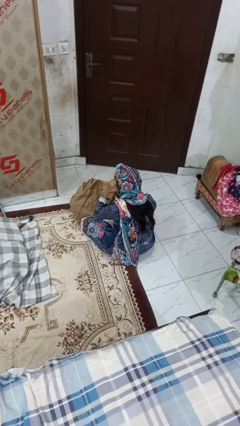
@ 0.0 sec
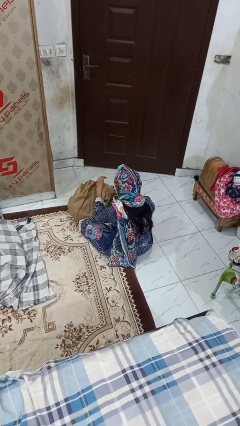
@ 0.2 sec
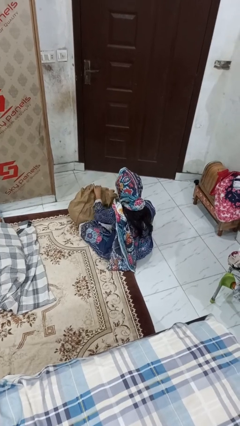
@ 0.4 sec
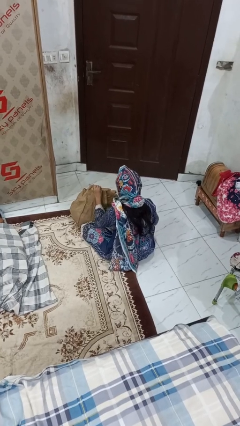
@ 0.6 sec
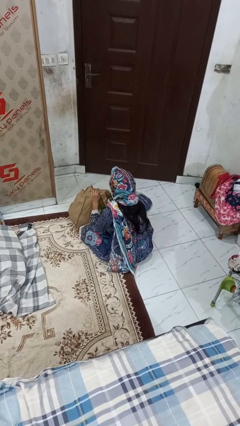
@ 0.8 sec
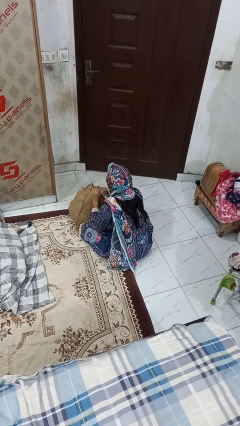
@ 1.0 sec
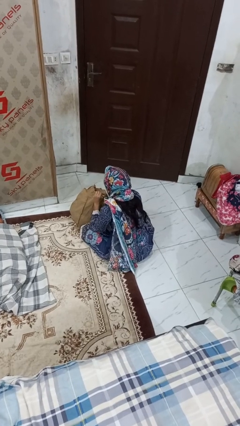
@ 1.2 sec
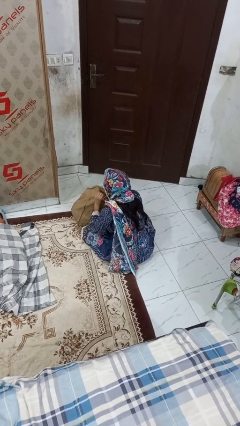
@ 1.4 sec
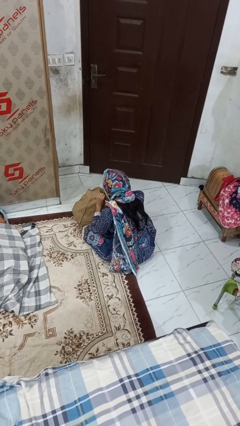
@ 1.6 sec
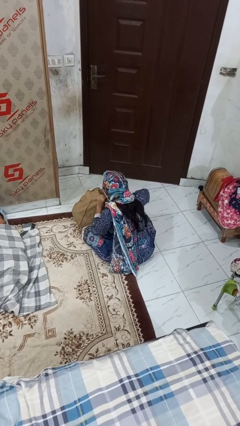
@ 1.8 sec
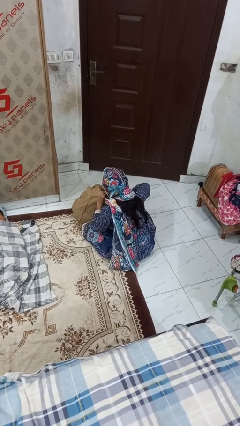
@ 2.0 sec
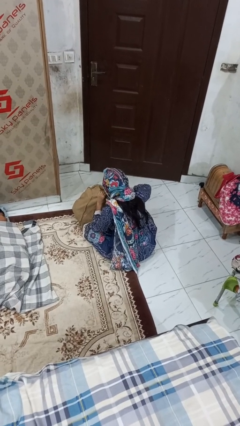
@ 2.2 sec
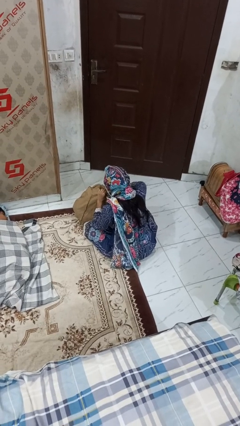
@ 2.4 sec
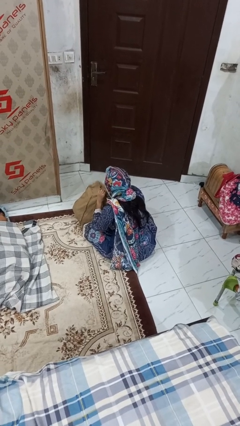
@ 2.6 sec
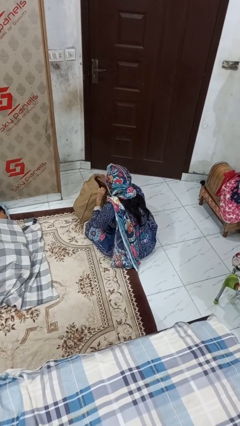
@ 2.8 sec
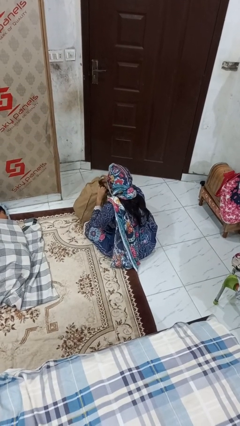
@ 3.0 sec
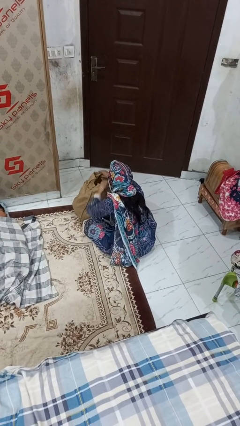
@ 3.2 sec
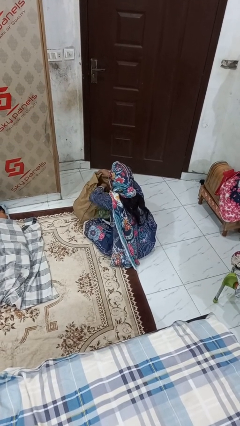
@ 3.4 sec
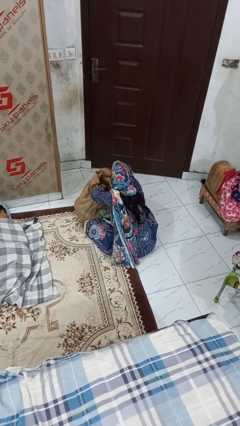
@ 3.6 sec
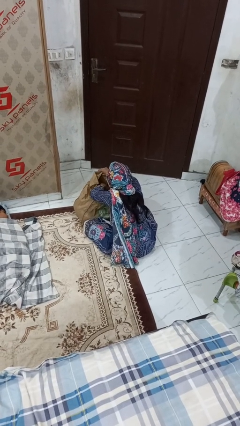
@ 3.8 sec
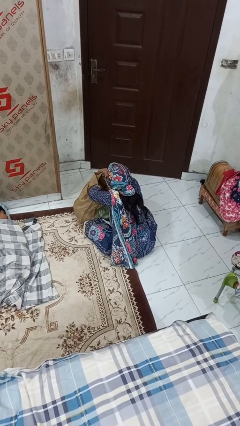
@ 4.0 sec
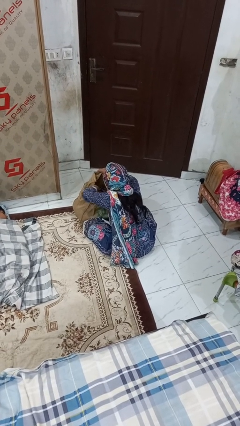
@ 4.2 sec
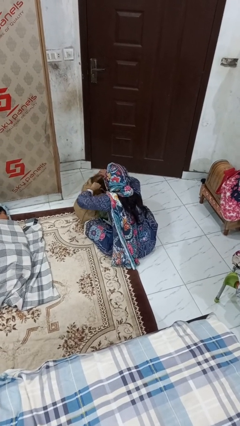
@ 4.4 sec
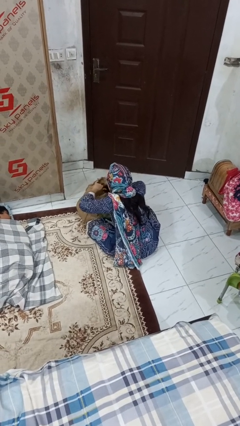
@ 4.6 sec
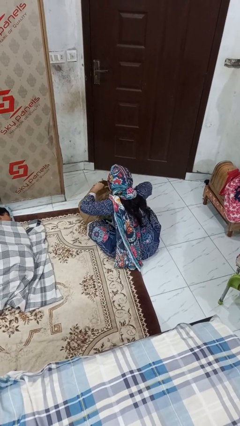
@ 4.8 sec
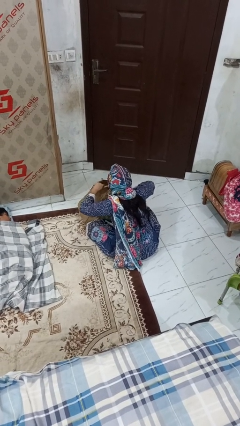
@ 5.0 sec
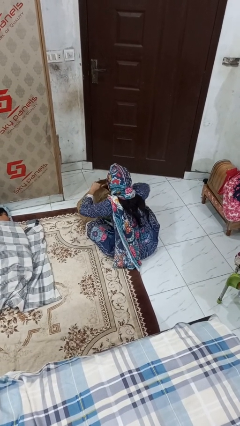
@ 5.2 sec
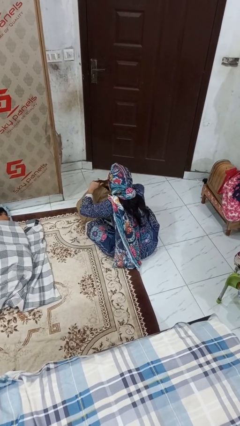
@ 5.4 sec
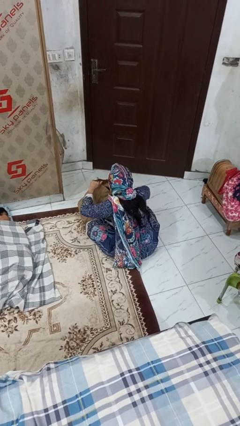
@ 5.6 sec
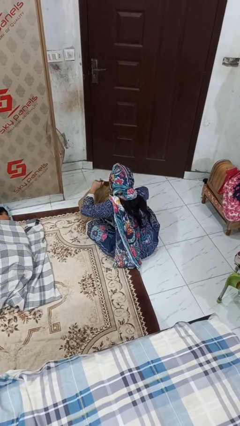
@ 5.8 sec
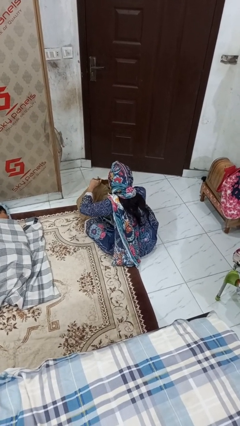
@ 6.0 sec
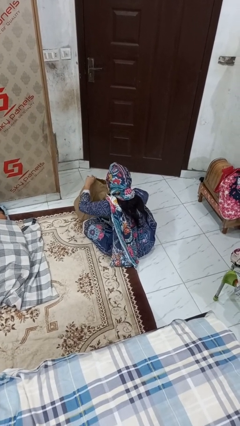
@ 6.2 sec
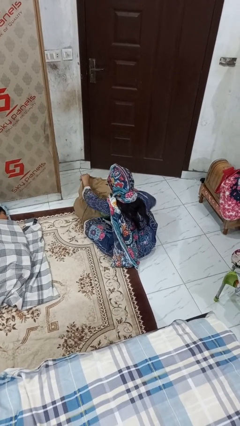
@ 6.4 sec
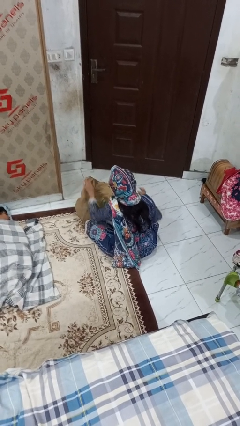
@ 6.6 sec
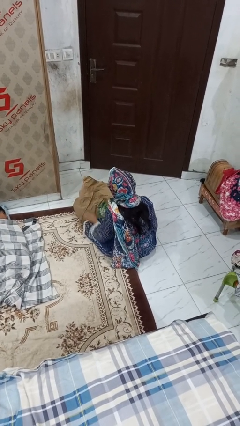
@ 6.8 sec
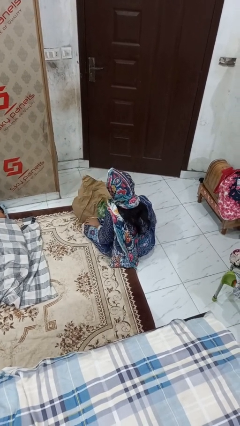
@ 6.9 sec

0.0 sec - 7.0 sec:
person searches in bag

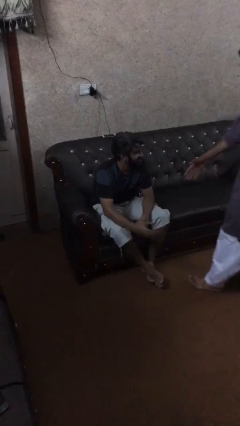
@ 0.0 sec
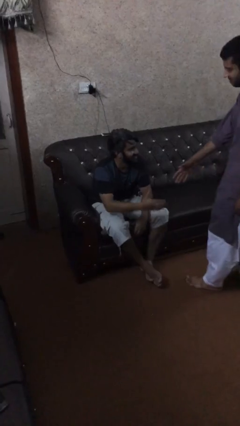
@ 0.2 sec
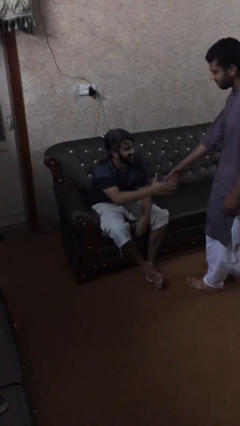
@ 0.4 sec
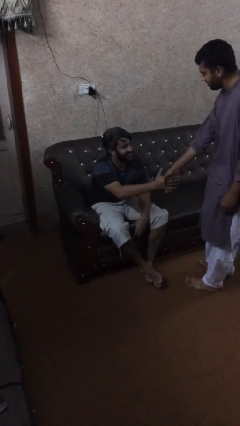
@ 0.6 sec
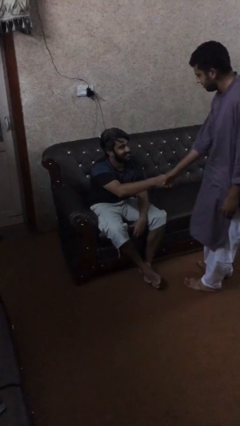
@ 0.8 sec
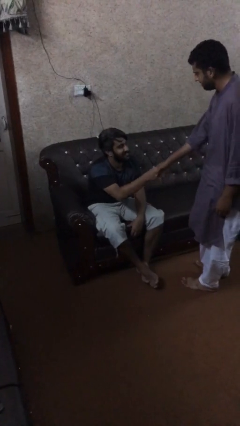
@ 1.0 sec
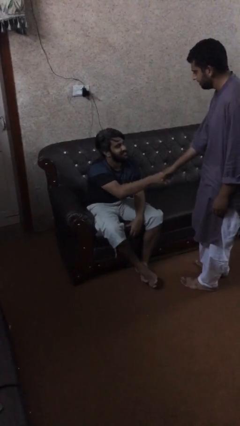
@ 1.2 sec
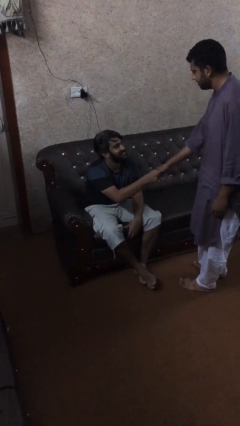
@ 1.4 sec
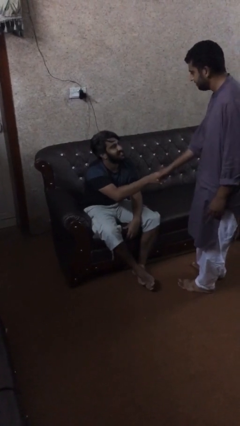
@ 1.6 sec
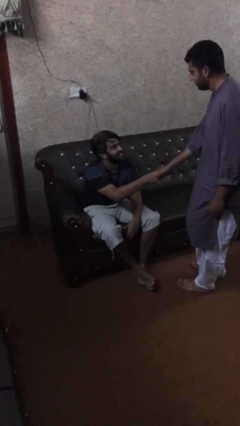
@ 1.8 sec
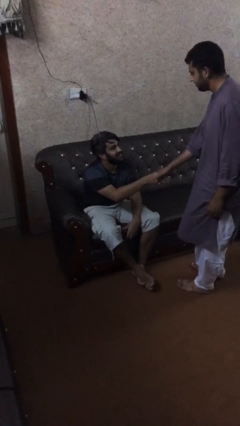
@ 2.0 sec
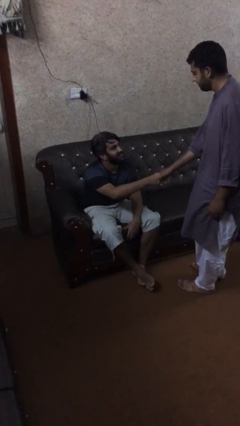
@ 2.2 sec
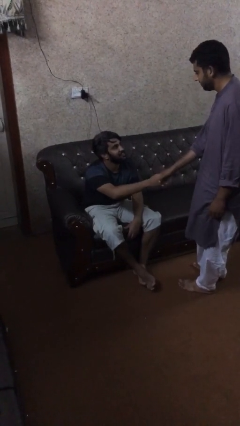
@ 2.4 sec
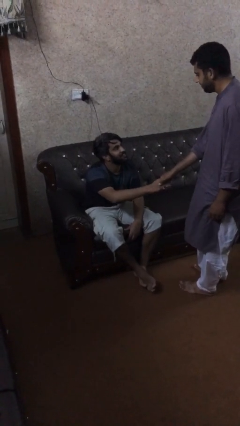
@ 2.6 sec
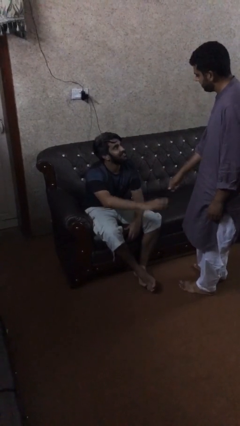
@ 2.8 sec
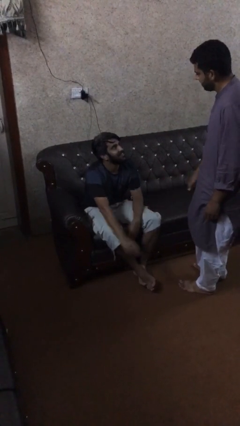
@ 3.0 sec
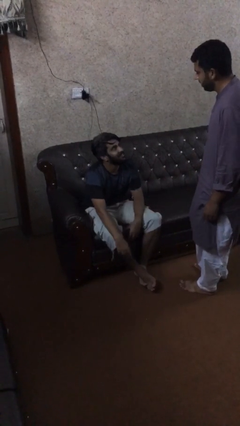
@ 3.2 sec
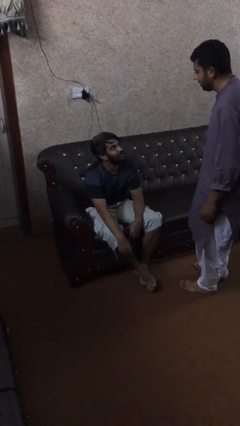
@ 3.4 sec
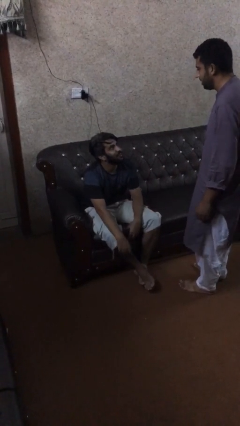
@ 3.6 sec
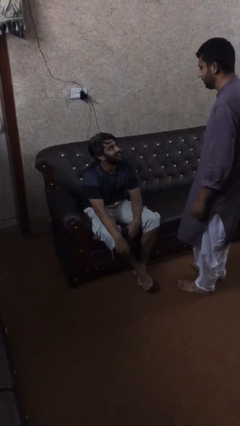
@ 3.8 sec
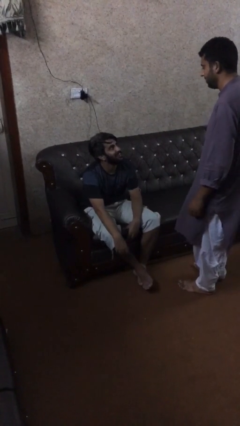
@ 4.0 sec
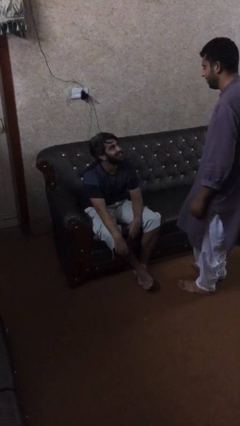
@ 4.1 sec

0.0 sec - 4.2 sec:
person shakes hand

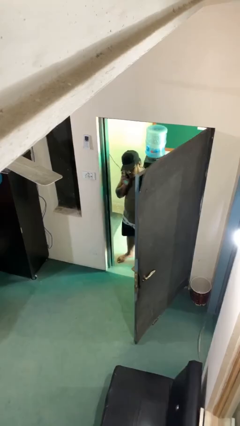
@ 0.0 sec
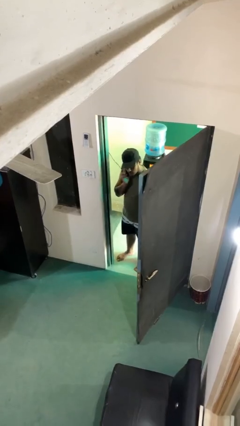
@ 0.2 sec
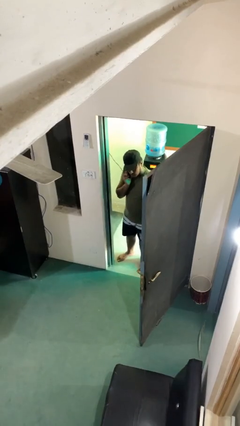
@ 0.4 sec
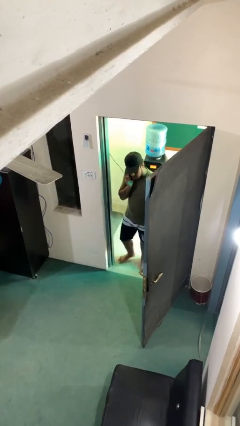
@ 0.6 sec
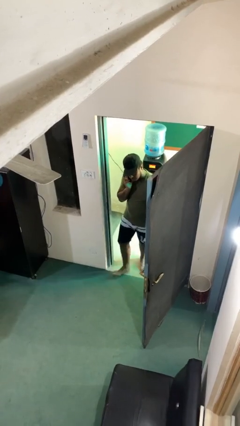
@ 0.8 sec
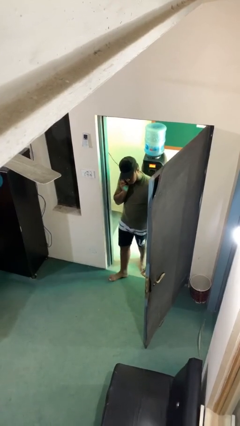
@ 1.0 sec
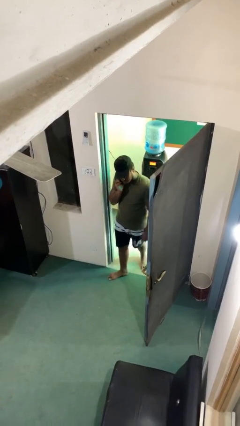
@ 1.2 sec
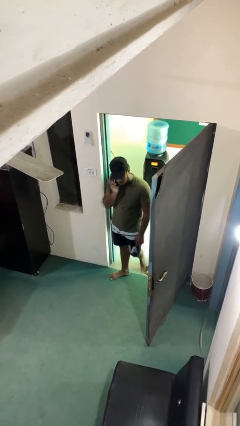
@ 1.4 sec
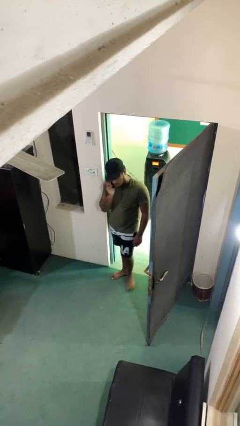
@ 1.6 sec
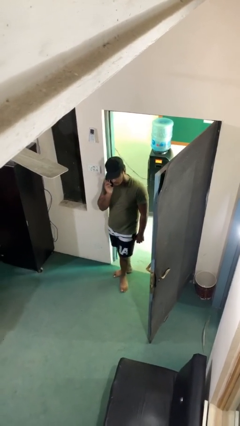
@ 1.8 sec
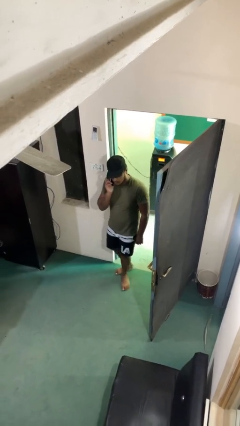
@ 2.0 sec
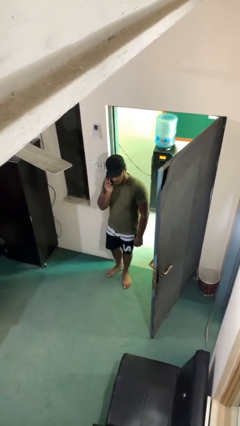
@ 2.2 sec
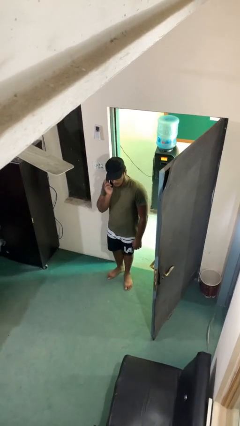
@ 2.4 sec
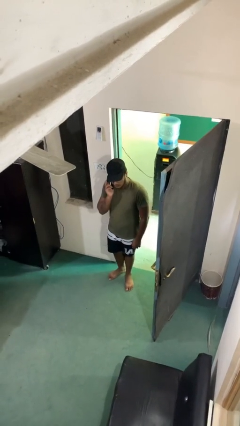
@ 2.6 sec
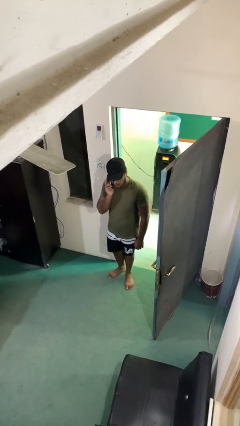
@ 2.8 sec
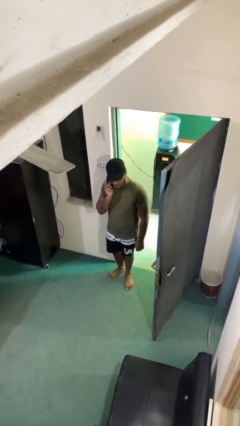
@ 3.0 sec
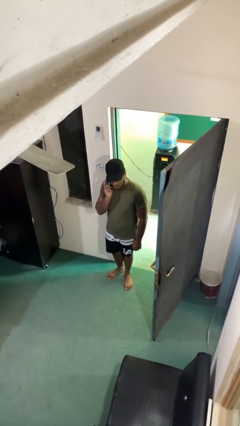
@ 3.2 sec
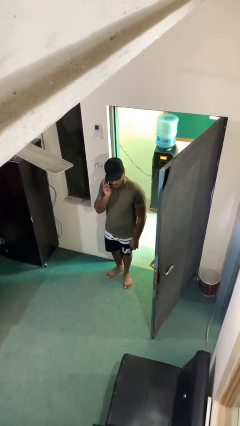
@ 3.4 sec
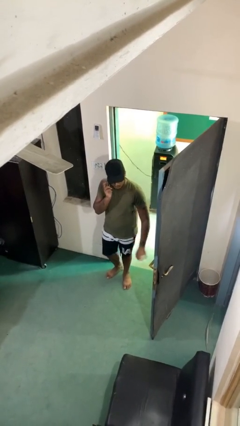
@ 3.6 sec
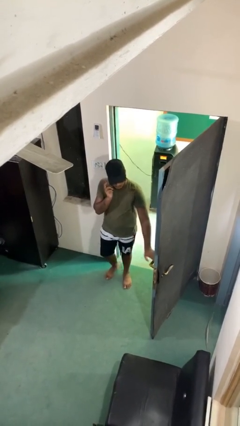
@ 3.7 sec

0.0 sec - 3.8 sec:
person enters scene through structure

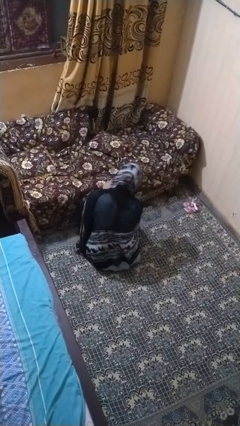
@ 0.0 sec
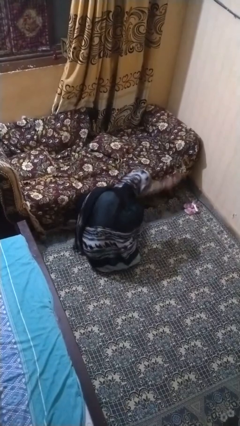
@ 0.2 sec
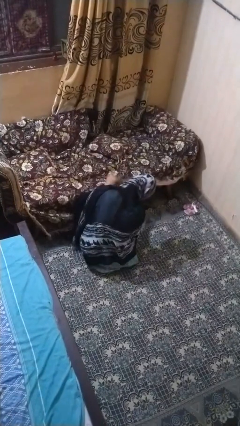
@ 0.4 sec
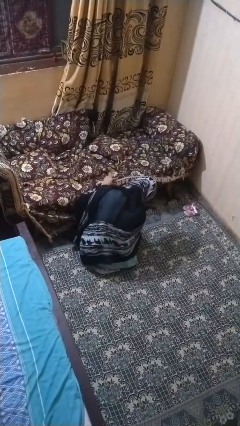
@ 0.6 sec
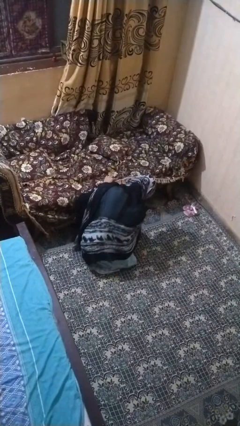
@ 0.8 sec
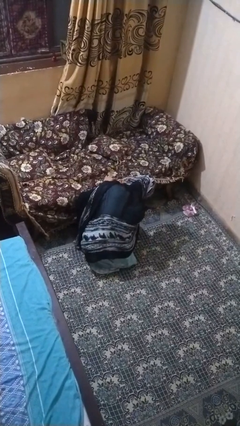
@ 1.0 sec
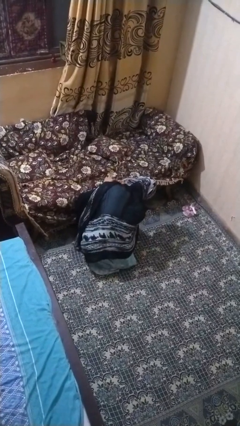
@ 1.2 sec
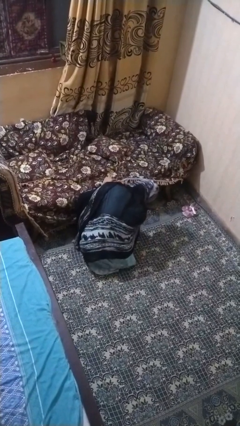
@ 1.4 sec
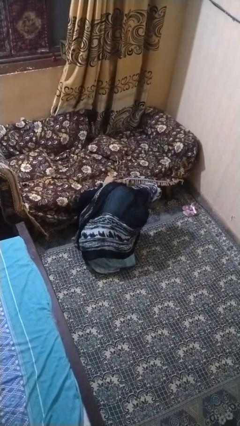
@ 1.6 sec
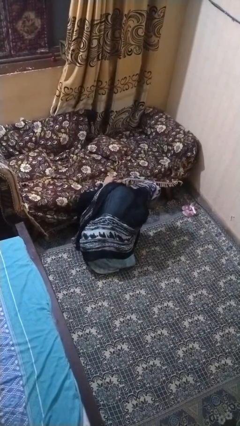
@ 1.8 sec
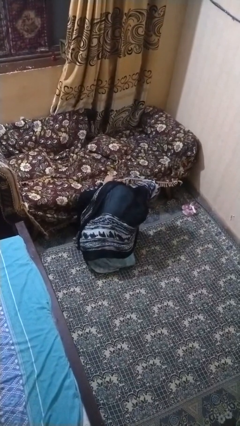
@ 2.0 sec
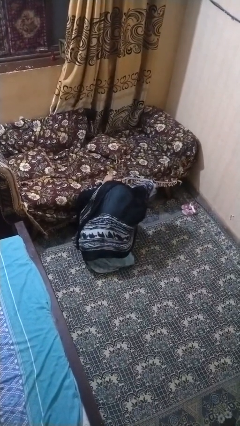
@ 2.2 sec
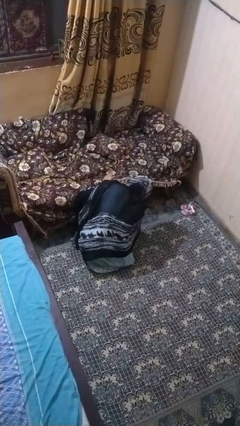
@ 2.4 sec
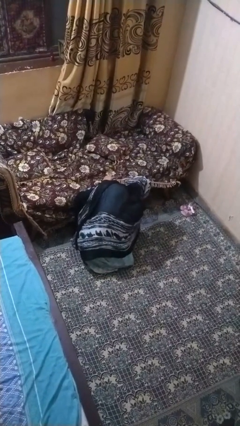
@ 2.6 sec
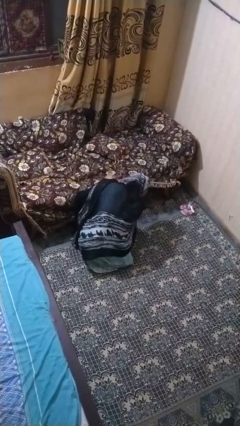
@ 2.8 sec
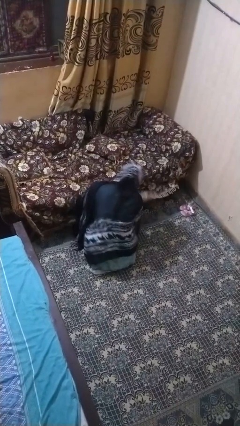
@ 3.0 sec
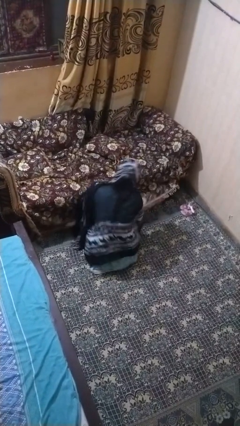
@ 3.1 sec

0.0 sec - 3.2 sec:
person searches under couch
